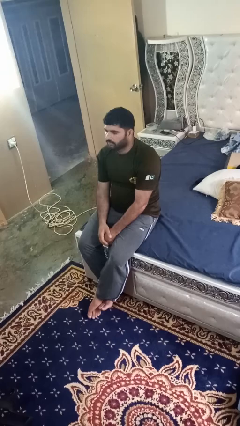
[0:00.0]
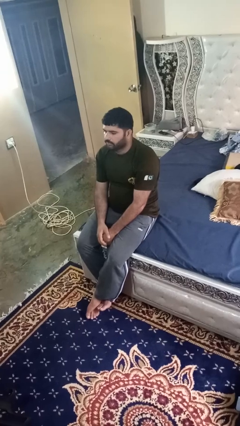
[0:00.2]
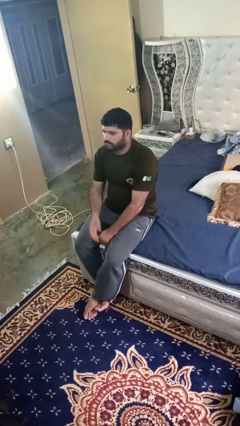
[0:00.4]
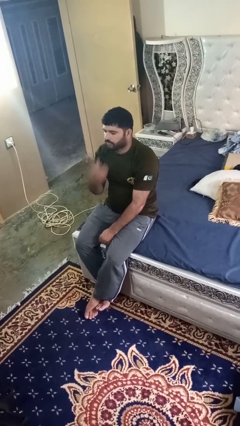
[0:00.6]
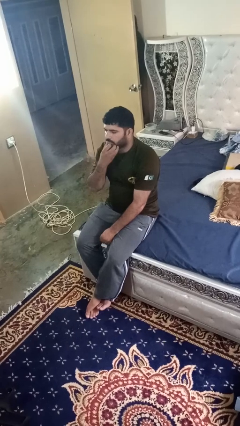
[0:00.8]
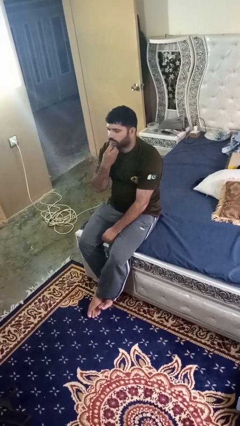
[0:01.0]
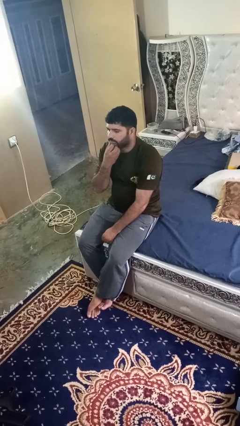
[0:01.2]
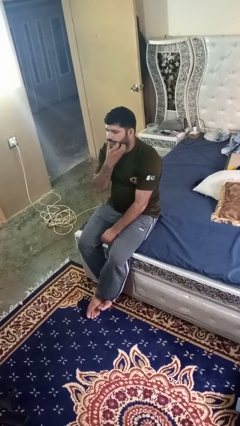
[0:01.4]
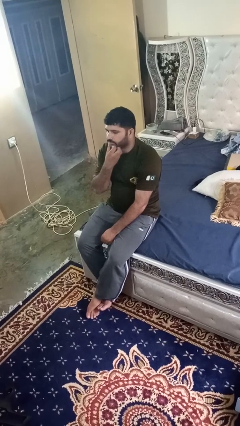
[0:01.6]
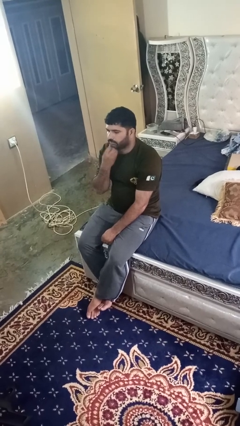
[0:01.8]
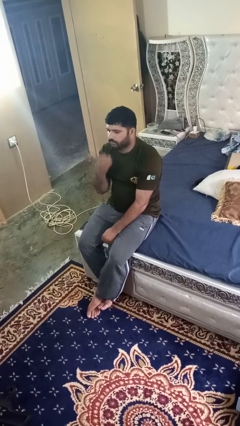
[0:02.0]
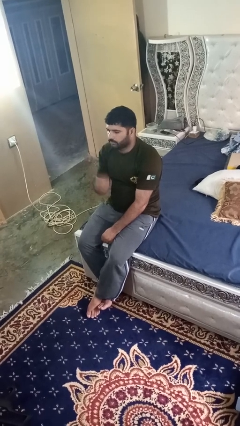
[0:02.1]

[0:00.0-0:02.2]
person strokes chin

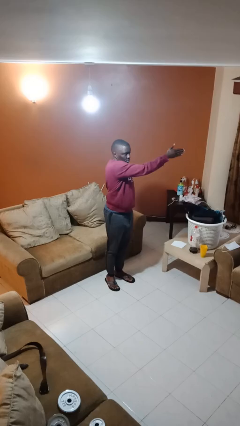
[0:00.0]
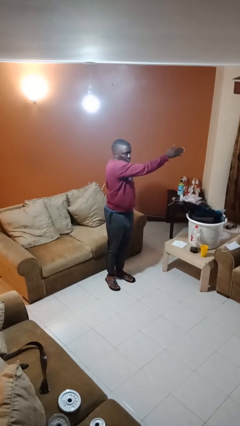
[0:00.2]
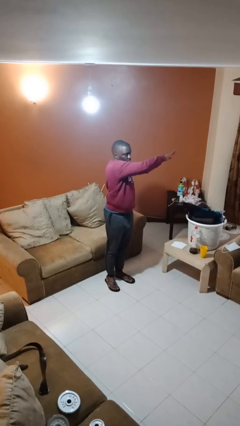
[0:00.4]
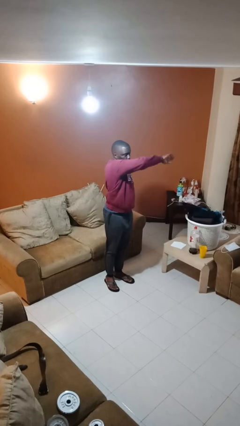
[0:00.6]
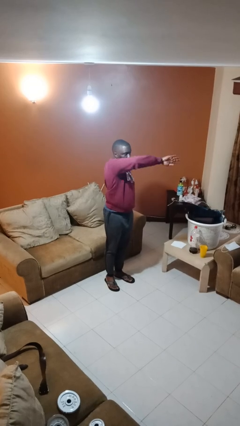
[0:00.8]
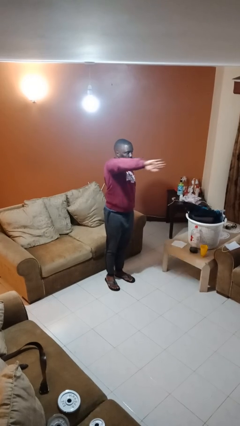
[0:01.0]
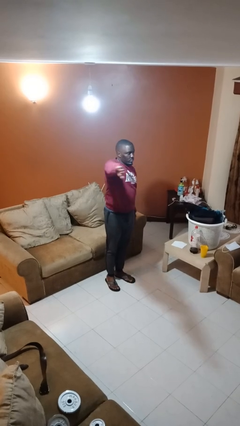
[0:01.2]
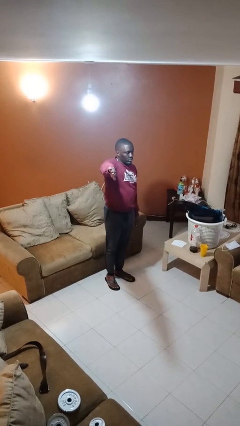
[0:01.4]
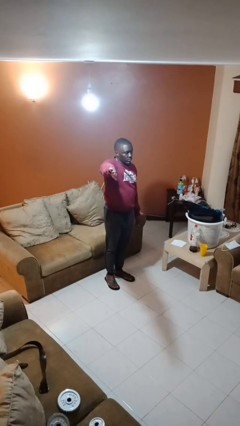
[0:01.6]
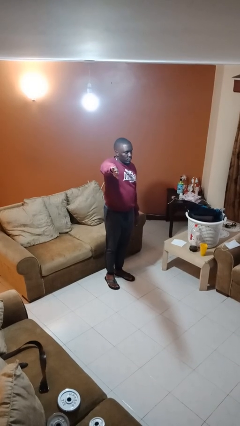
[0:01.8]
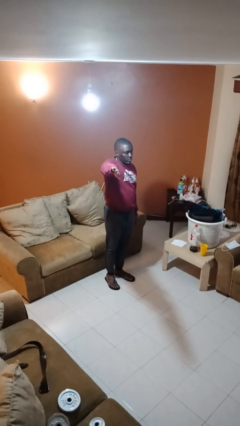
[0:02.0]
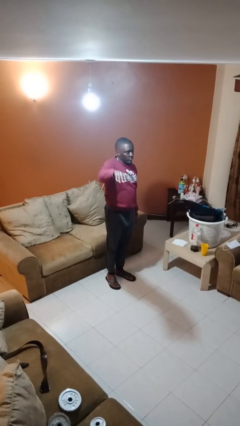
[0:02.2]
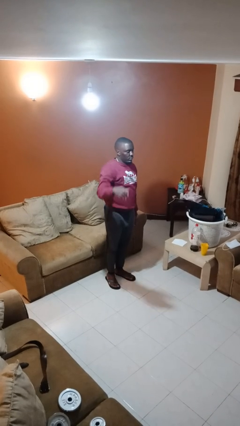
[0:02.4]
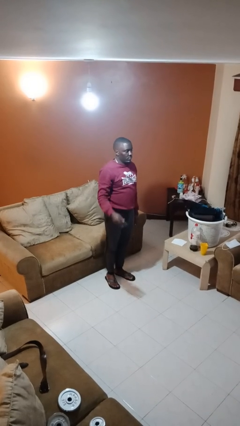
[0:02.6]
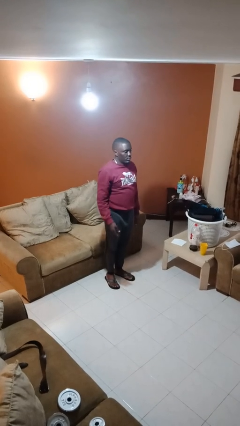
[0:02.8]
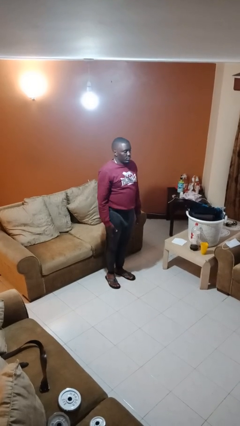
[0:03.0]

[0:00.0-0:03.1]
person gestures swipe right

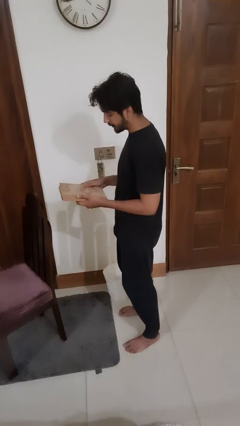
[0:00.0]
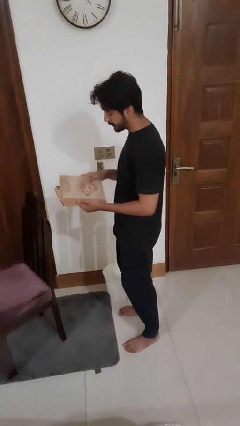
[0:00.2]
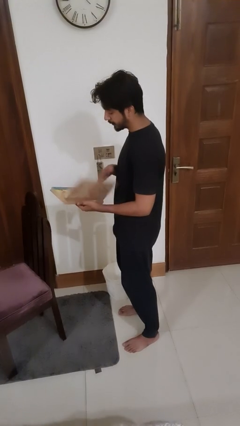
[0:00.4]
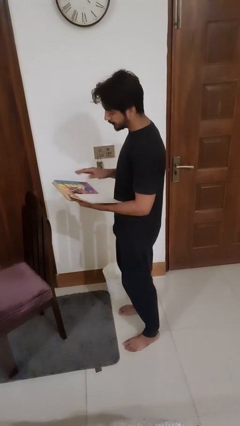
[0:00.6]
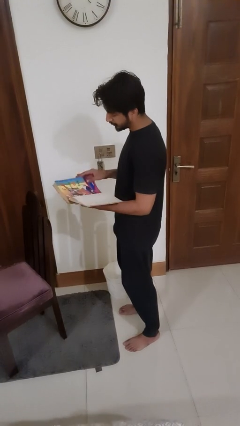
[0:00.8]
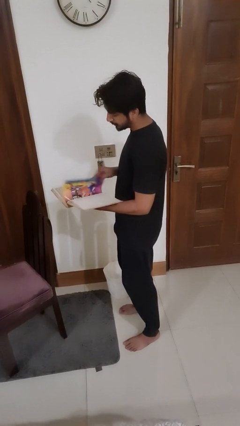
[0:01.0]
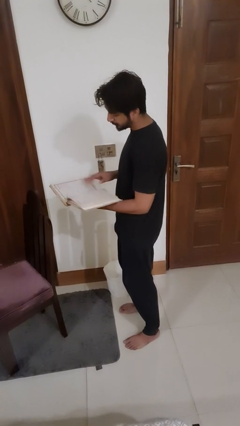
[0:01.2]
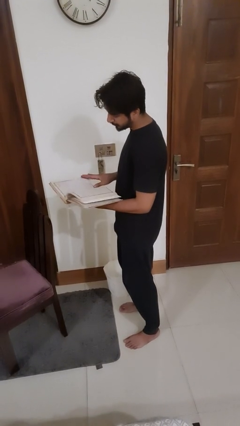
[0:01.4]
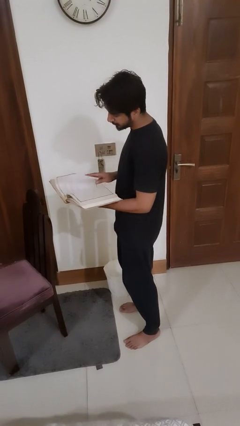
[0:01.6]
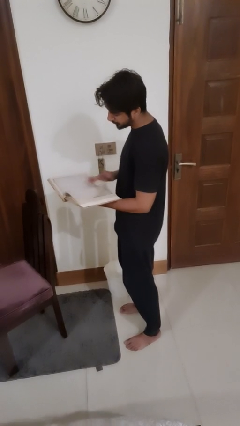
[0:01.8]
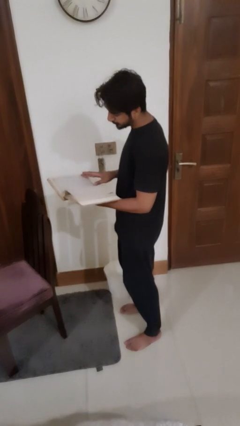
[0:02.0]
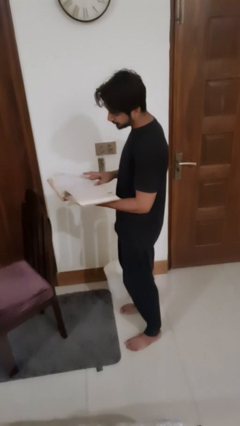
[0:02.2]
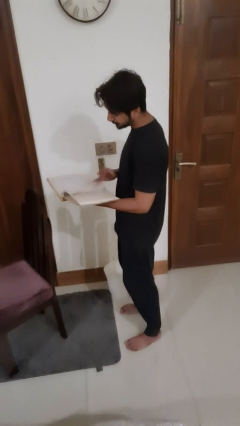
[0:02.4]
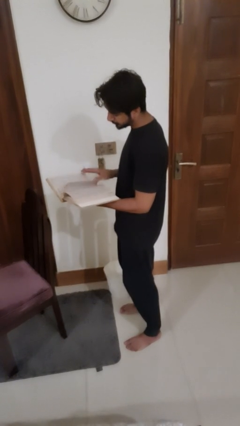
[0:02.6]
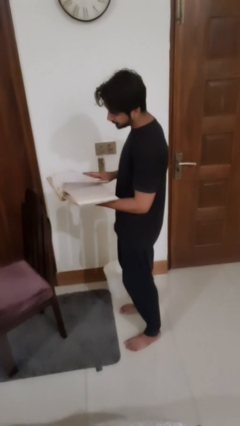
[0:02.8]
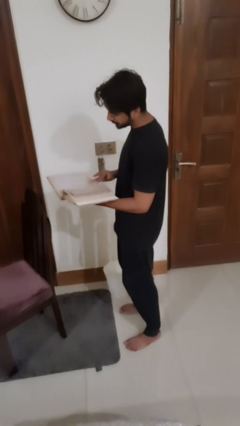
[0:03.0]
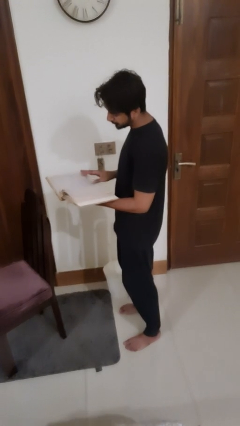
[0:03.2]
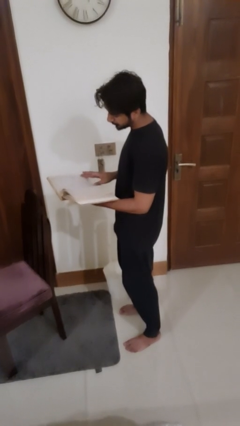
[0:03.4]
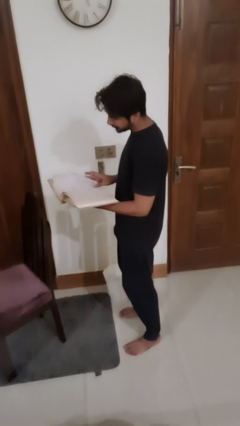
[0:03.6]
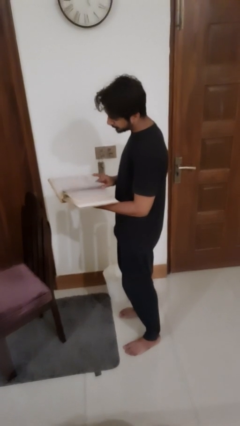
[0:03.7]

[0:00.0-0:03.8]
person reads book

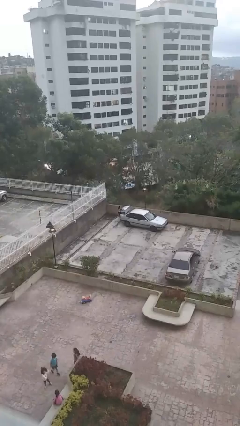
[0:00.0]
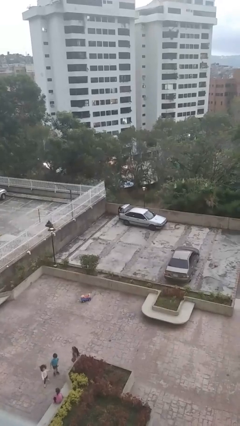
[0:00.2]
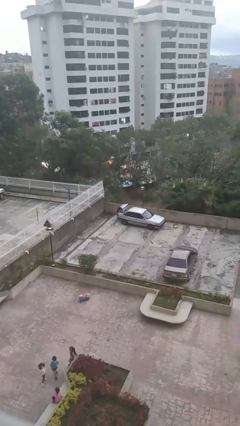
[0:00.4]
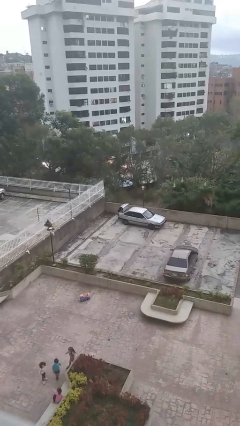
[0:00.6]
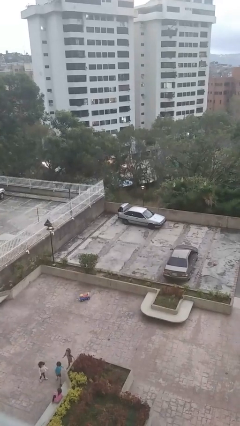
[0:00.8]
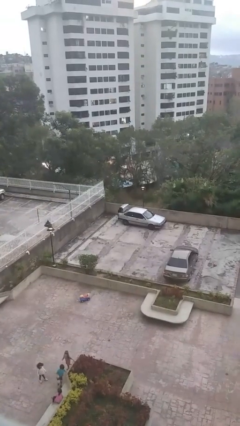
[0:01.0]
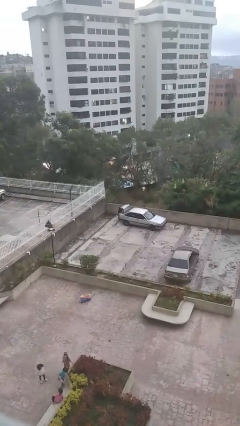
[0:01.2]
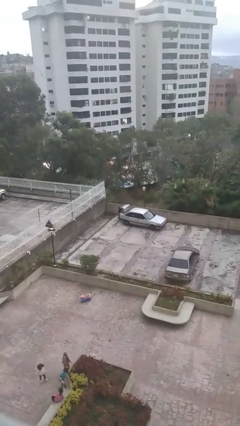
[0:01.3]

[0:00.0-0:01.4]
person loads car

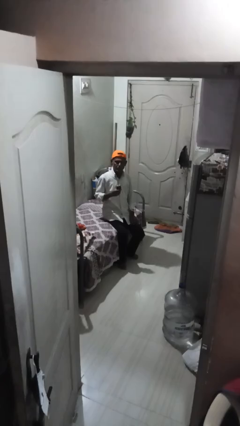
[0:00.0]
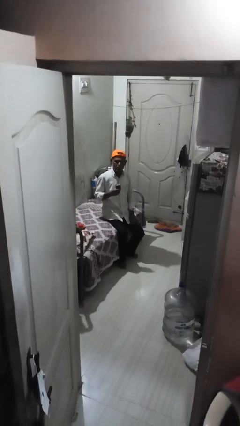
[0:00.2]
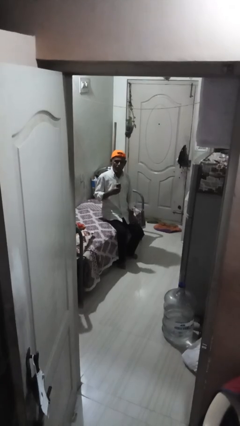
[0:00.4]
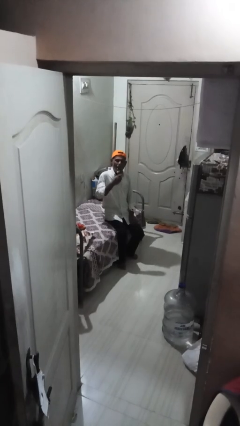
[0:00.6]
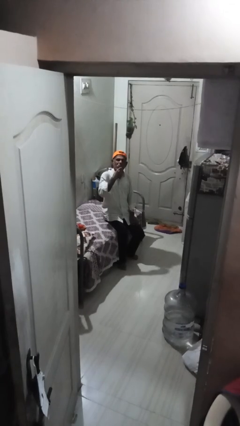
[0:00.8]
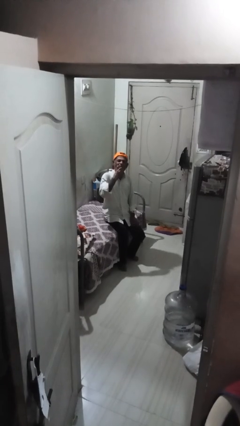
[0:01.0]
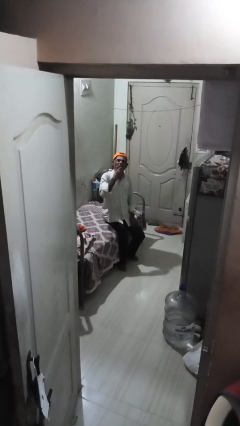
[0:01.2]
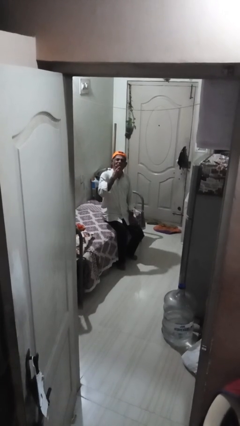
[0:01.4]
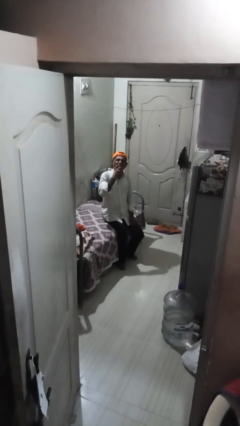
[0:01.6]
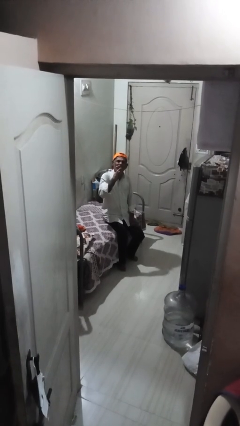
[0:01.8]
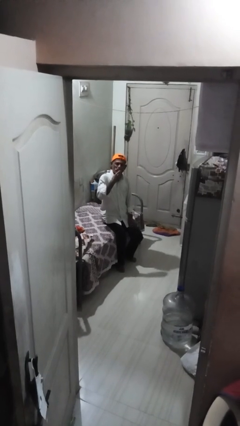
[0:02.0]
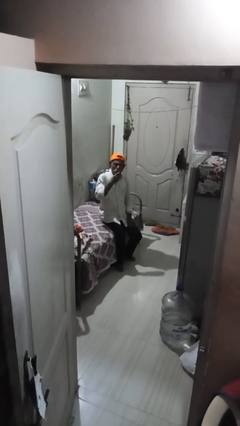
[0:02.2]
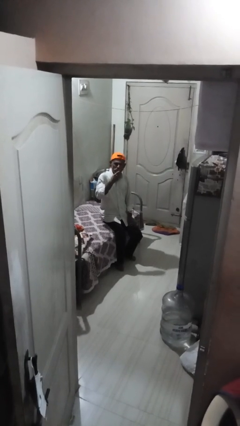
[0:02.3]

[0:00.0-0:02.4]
person eats apple

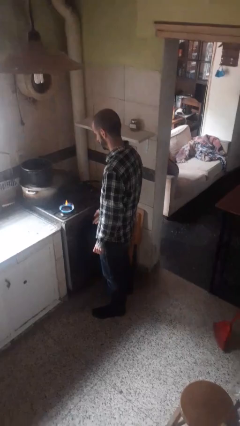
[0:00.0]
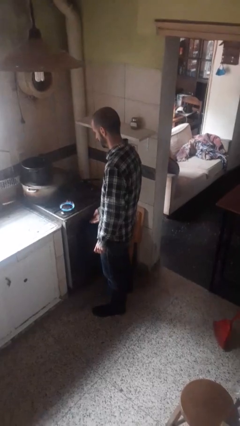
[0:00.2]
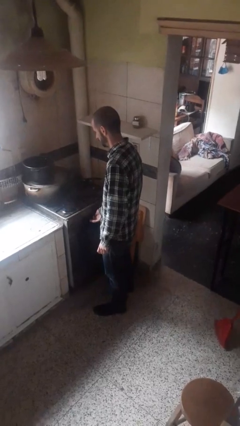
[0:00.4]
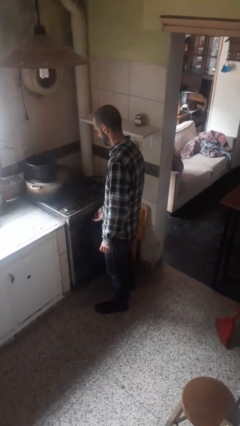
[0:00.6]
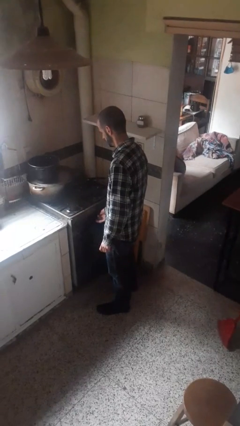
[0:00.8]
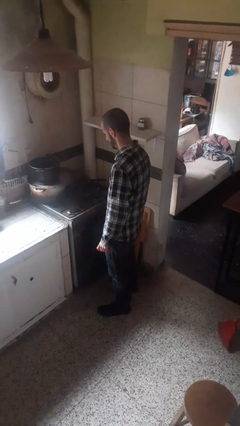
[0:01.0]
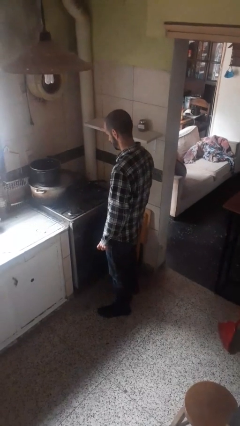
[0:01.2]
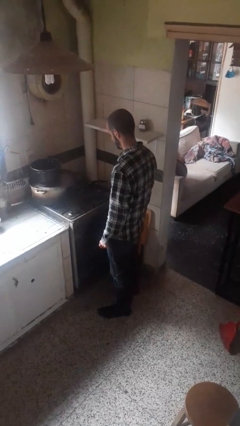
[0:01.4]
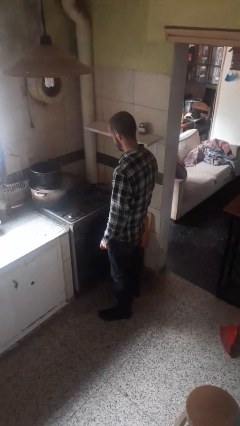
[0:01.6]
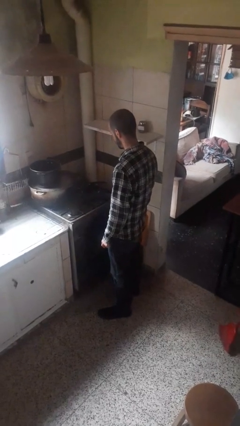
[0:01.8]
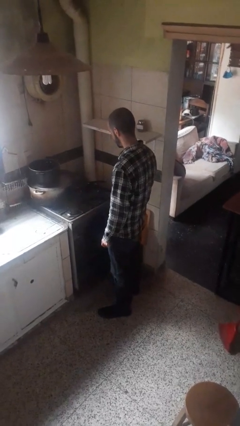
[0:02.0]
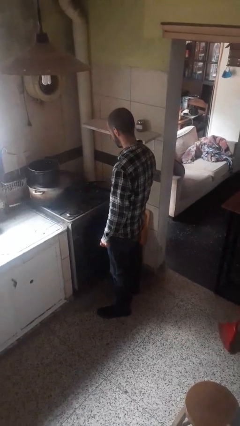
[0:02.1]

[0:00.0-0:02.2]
person turns off stovetop

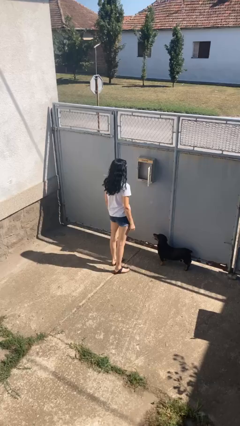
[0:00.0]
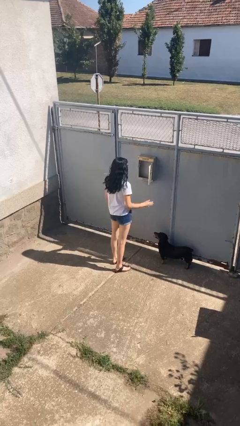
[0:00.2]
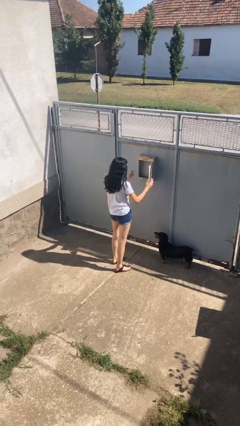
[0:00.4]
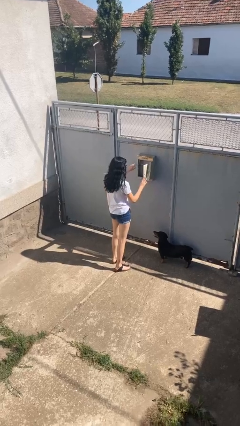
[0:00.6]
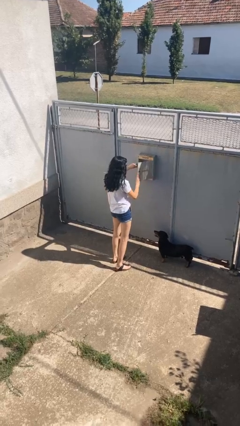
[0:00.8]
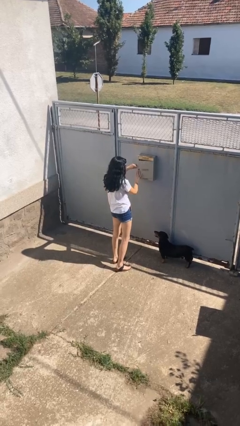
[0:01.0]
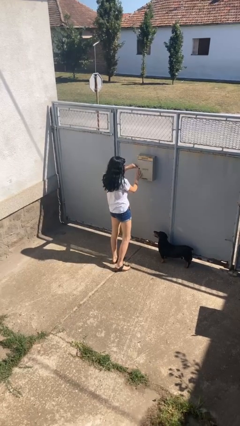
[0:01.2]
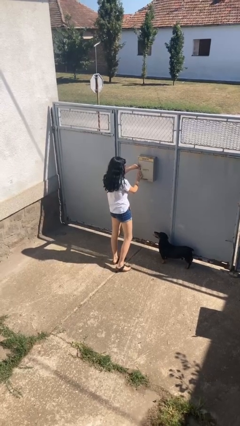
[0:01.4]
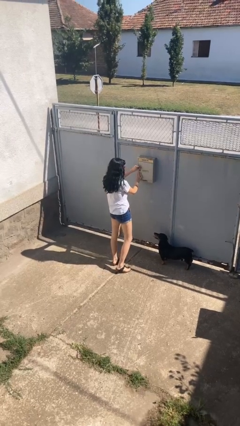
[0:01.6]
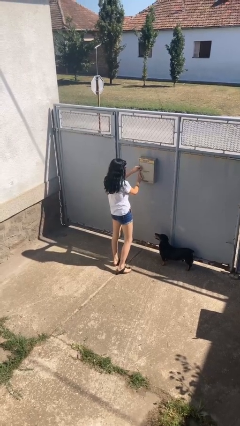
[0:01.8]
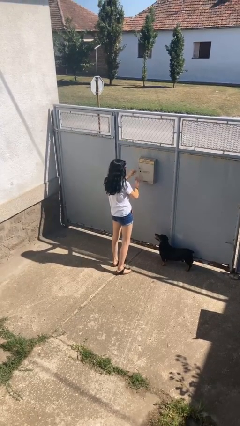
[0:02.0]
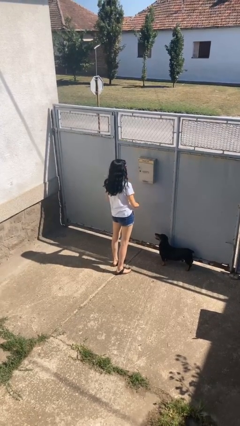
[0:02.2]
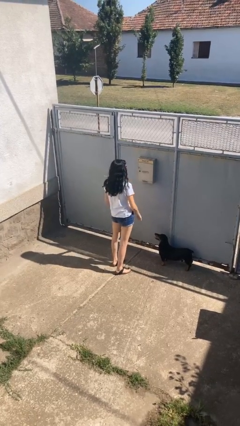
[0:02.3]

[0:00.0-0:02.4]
person closes mailbox

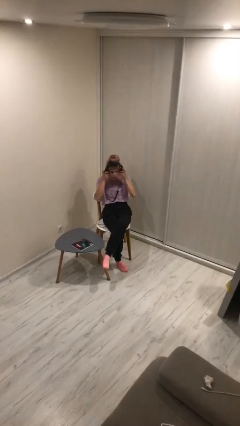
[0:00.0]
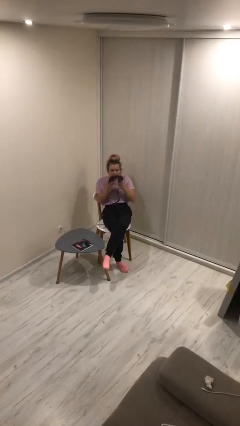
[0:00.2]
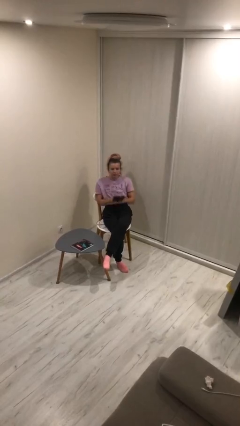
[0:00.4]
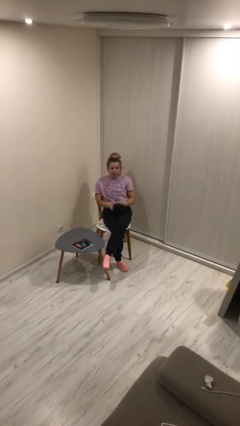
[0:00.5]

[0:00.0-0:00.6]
person takes off headphones